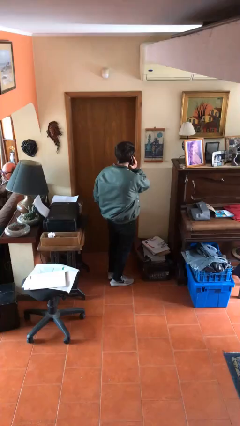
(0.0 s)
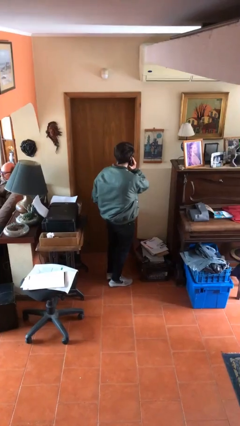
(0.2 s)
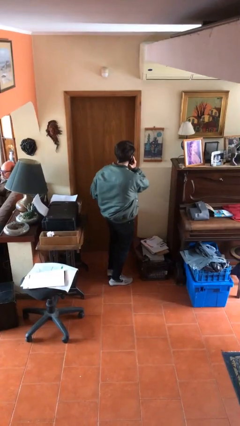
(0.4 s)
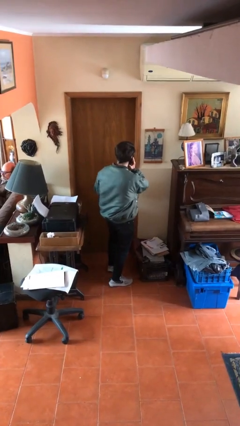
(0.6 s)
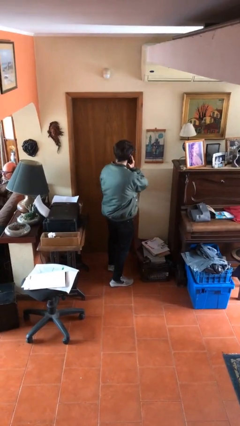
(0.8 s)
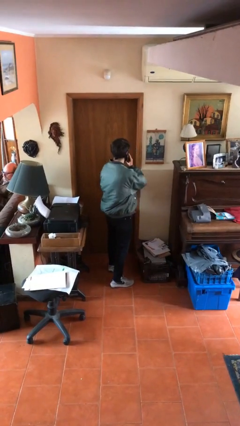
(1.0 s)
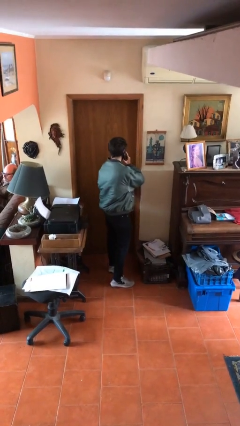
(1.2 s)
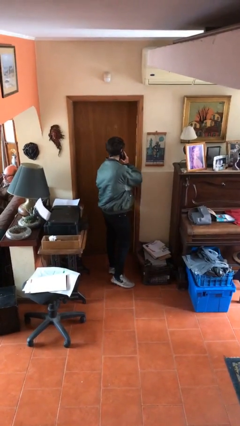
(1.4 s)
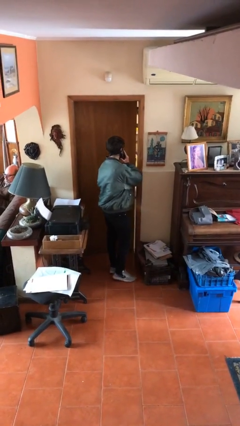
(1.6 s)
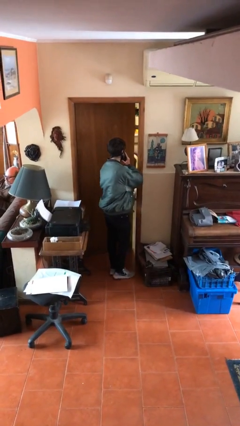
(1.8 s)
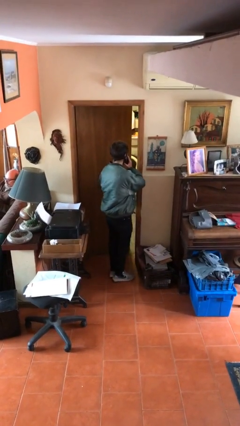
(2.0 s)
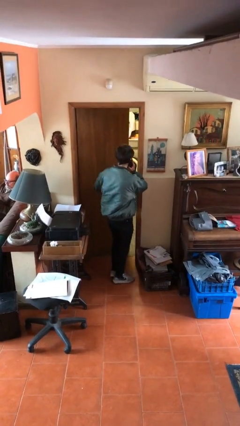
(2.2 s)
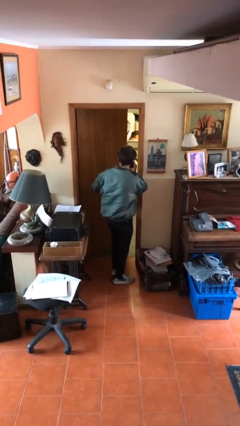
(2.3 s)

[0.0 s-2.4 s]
person opens facility door

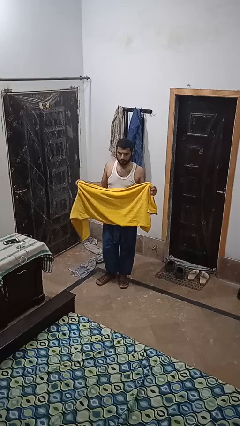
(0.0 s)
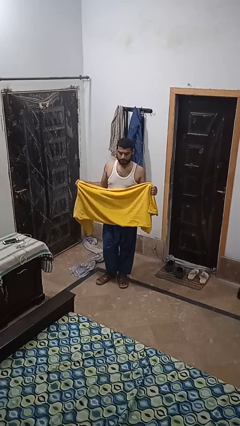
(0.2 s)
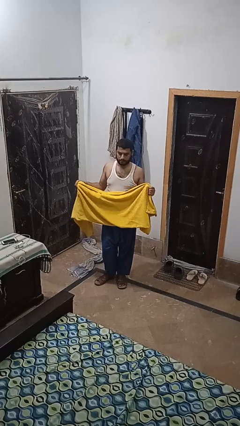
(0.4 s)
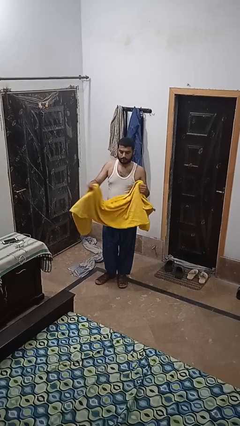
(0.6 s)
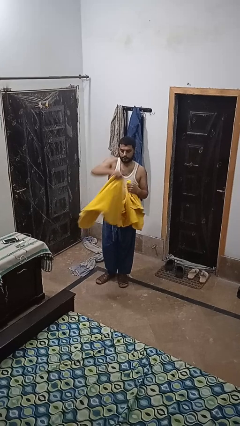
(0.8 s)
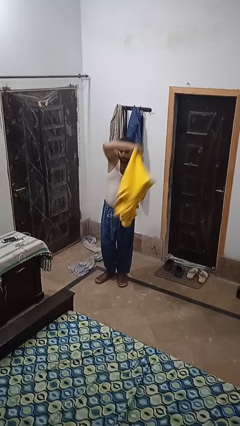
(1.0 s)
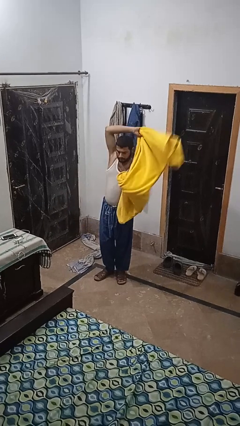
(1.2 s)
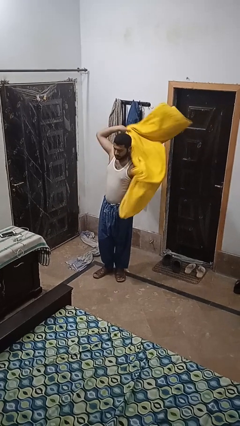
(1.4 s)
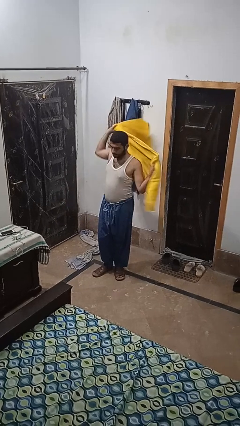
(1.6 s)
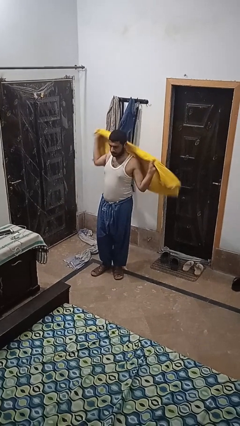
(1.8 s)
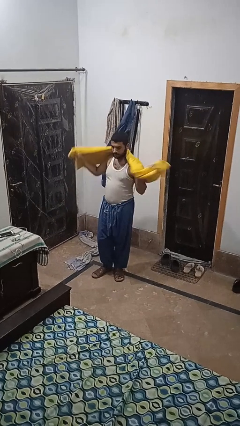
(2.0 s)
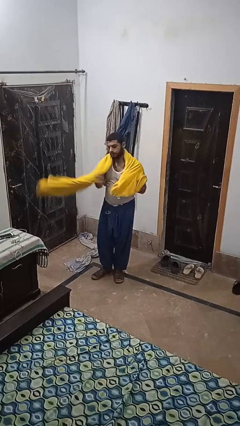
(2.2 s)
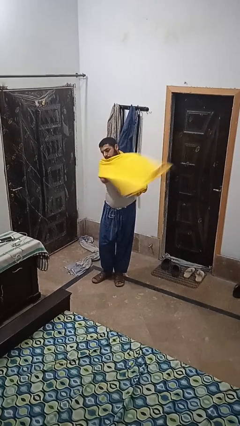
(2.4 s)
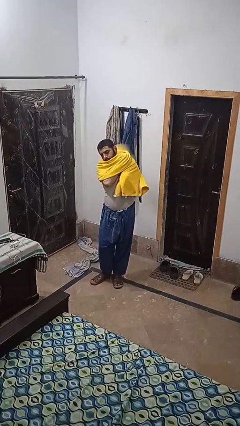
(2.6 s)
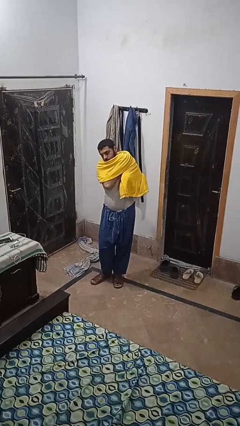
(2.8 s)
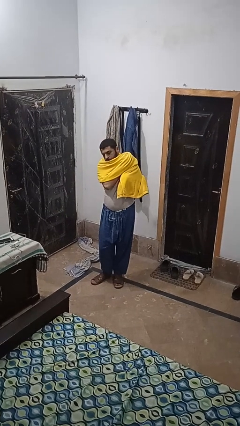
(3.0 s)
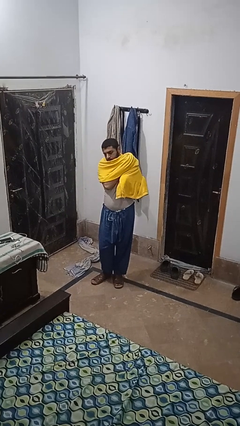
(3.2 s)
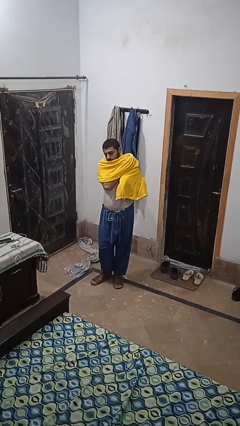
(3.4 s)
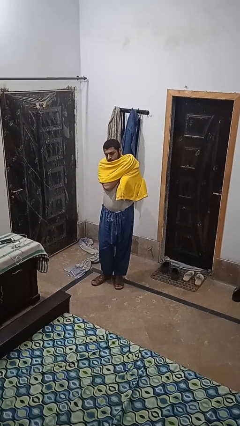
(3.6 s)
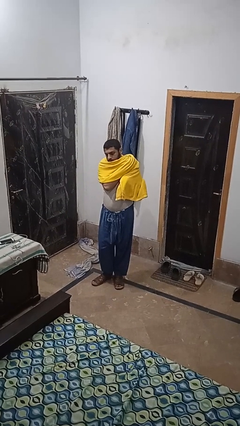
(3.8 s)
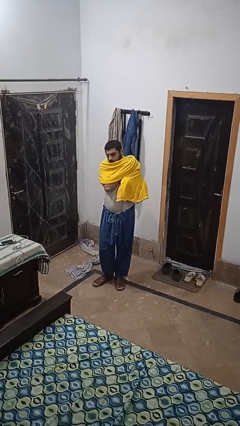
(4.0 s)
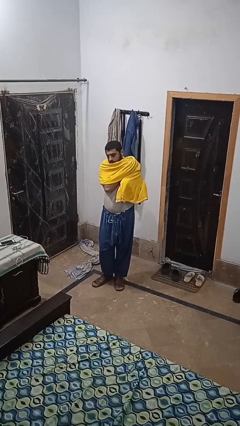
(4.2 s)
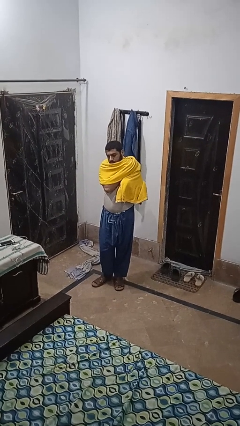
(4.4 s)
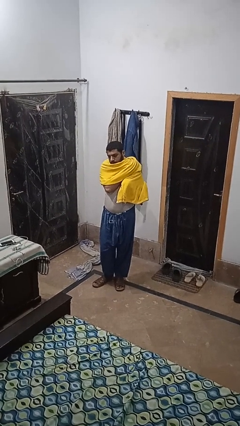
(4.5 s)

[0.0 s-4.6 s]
person puts on scarf

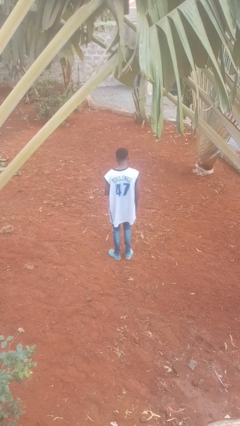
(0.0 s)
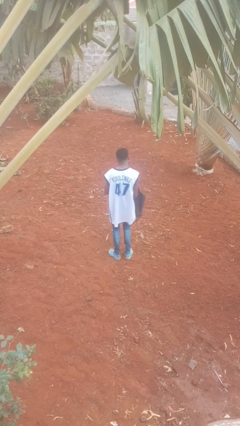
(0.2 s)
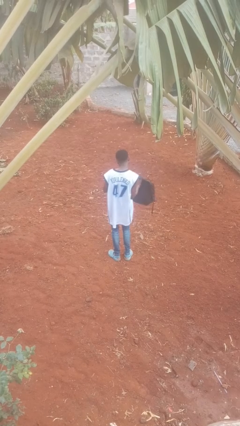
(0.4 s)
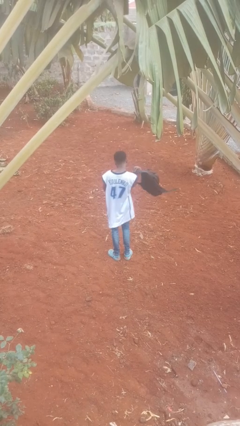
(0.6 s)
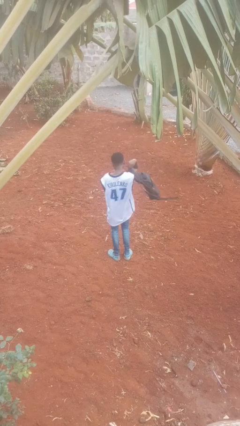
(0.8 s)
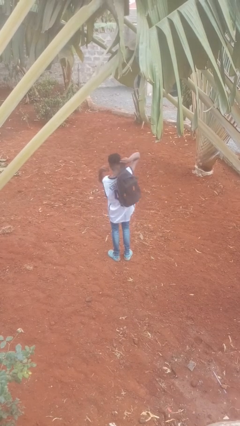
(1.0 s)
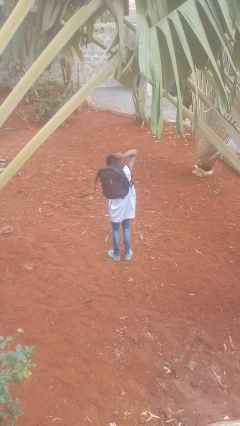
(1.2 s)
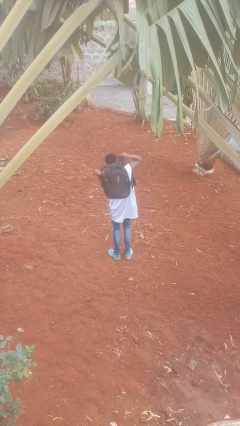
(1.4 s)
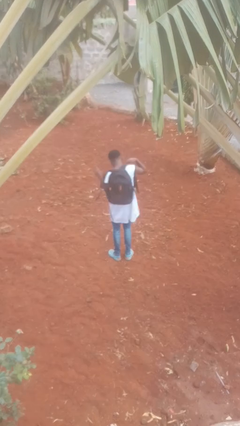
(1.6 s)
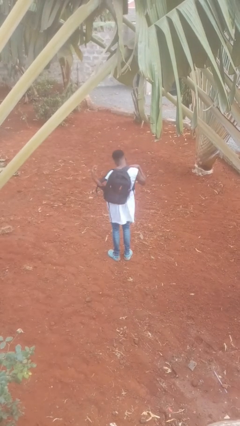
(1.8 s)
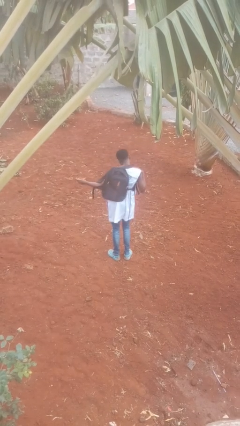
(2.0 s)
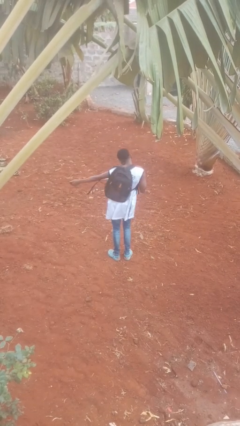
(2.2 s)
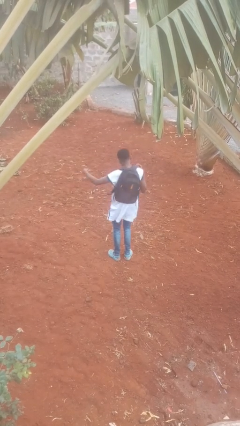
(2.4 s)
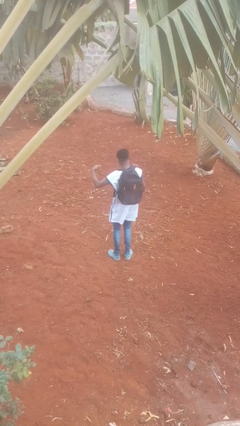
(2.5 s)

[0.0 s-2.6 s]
person puts on backpack

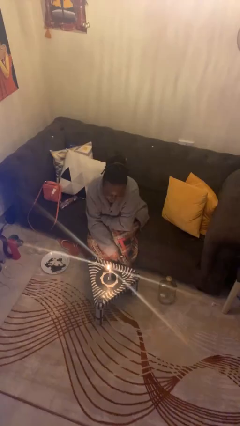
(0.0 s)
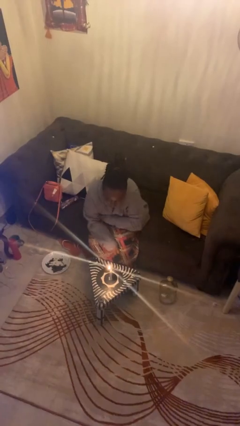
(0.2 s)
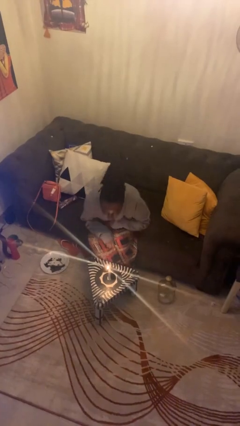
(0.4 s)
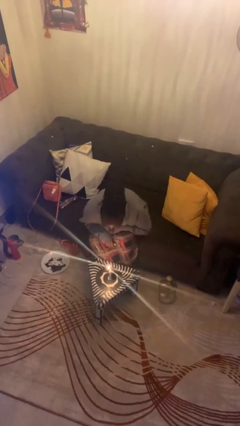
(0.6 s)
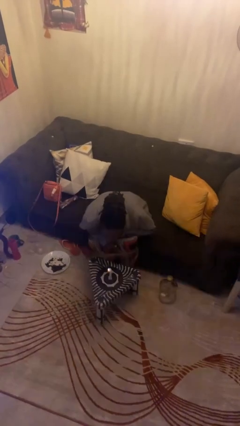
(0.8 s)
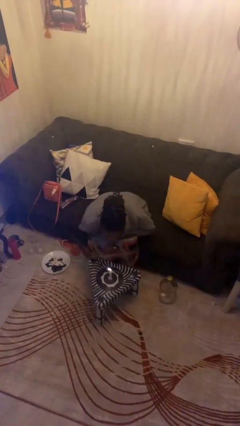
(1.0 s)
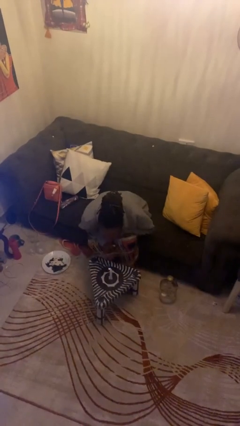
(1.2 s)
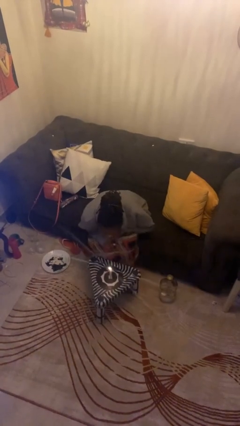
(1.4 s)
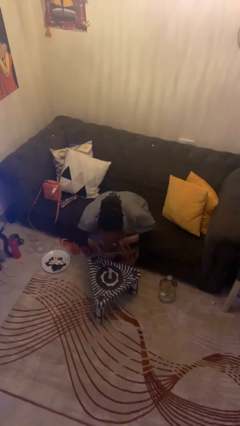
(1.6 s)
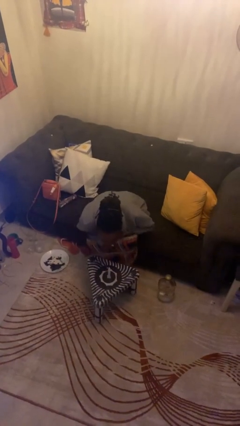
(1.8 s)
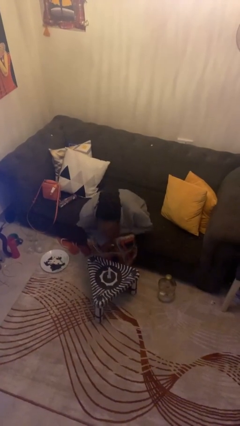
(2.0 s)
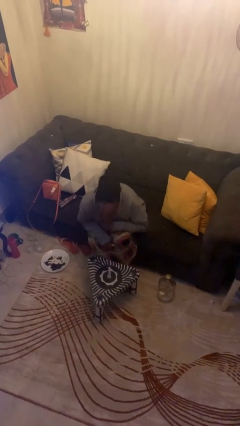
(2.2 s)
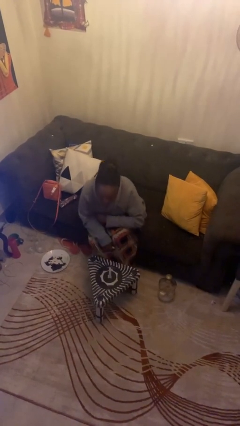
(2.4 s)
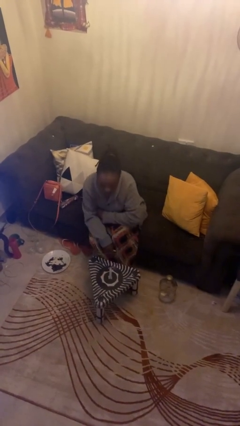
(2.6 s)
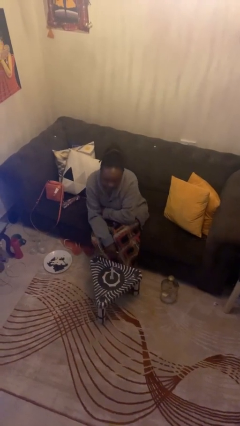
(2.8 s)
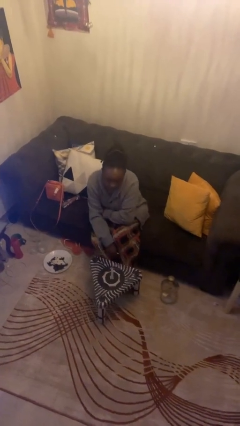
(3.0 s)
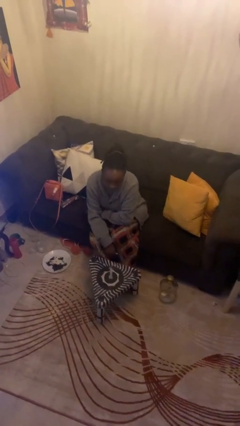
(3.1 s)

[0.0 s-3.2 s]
person extinguishes candle

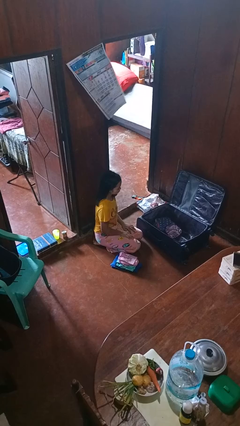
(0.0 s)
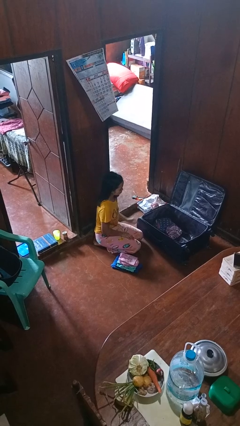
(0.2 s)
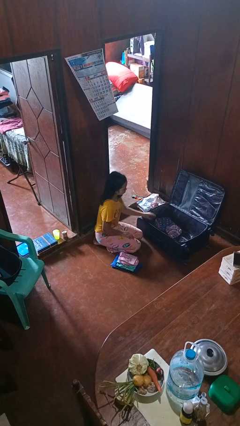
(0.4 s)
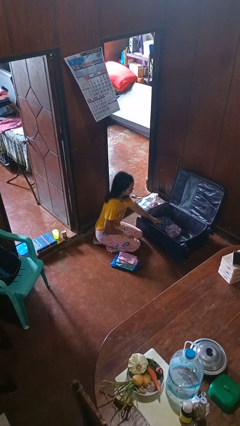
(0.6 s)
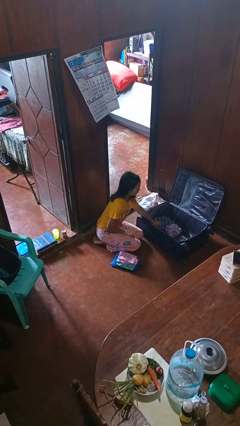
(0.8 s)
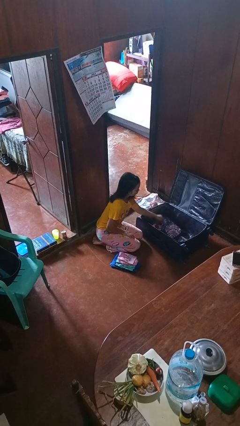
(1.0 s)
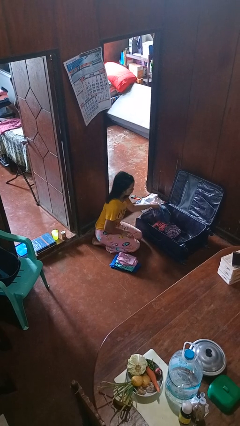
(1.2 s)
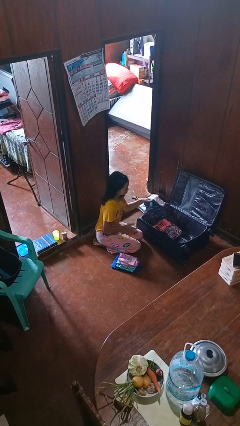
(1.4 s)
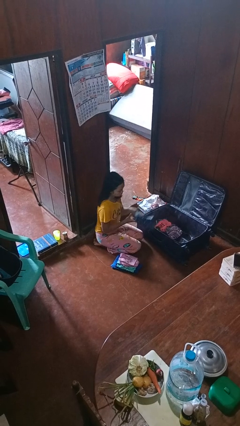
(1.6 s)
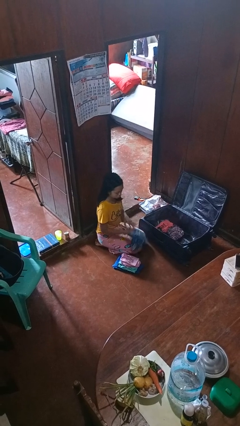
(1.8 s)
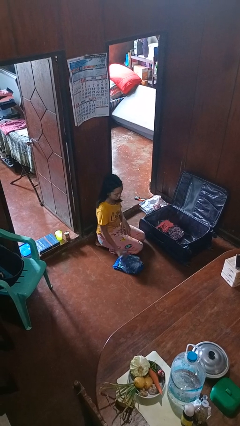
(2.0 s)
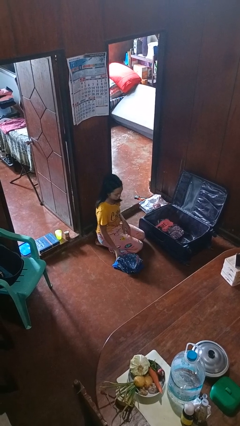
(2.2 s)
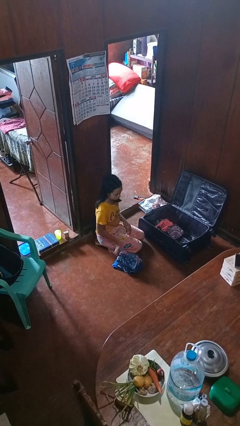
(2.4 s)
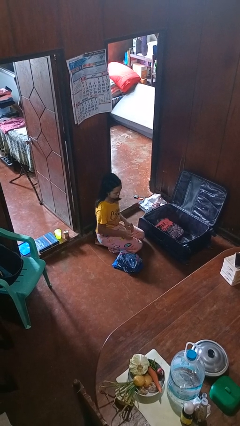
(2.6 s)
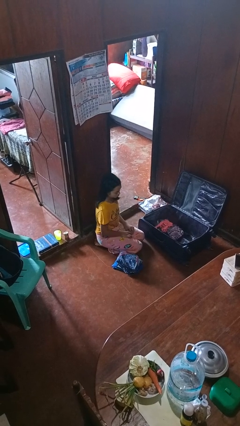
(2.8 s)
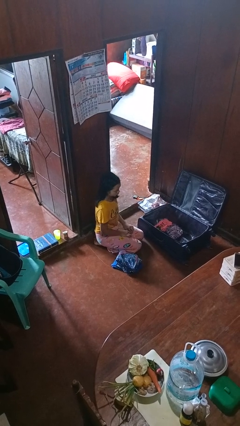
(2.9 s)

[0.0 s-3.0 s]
person unloads clothes from suitcase

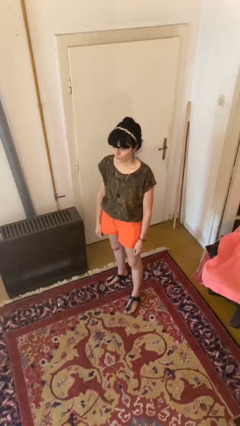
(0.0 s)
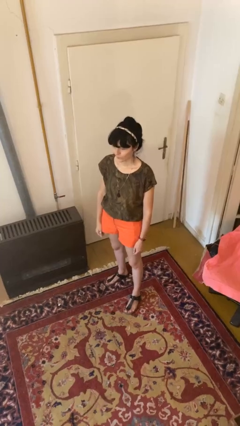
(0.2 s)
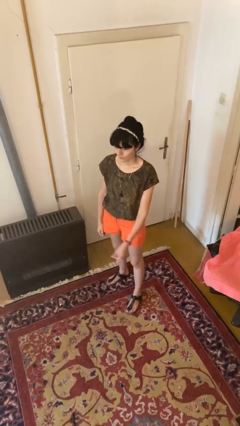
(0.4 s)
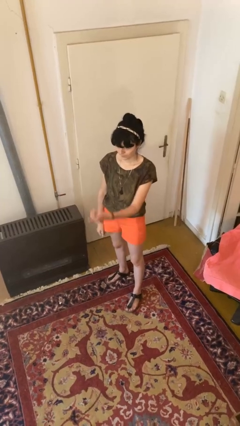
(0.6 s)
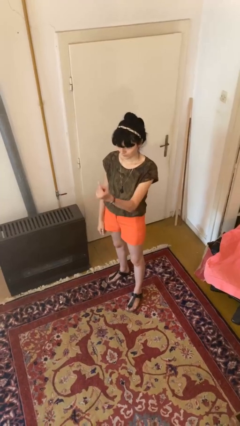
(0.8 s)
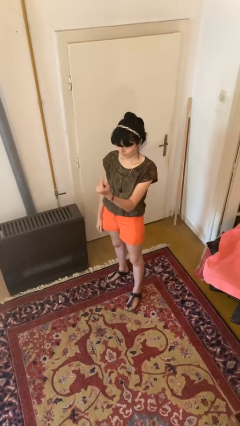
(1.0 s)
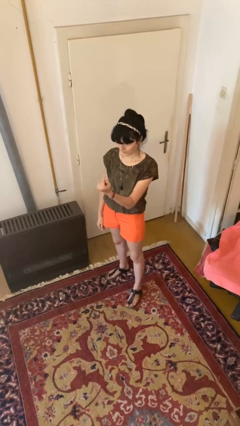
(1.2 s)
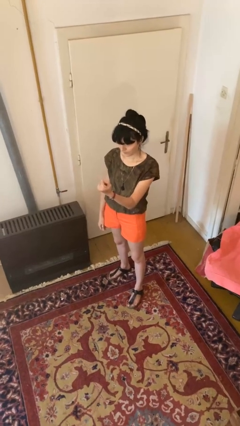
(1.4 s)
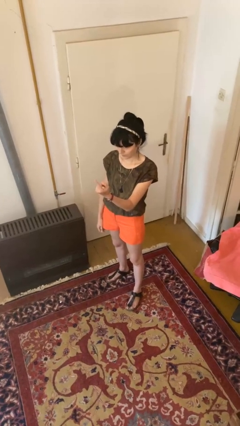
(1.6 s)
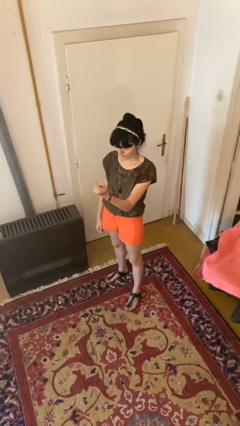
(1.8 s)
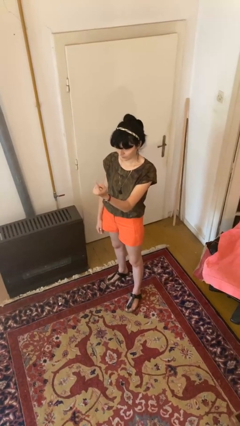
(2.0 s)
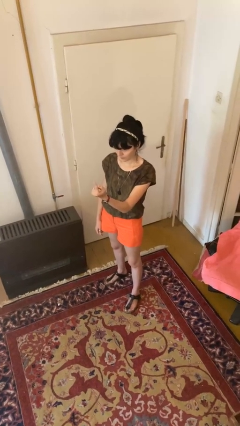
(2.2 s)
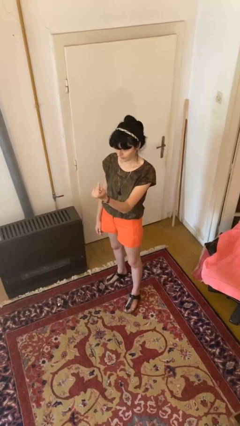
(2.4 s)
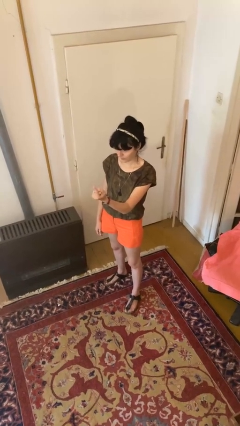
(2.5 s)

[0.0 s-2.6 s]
person gestures come here
